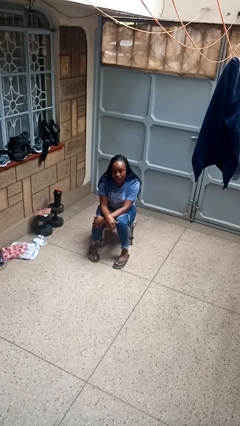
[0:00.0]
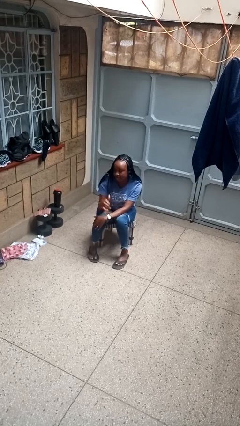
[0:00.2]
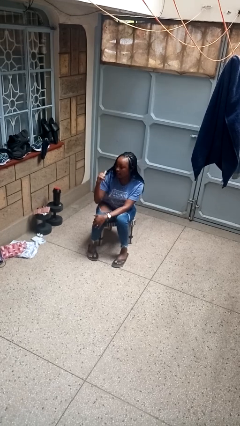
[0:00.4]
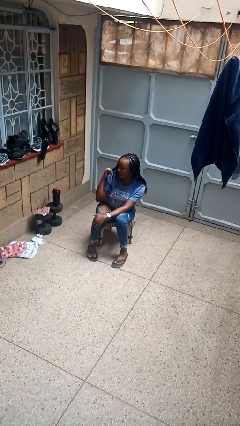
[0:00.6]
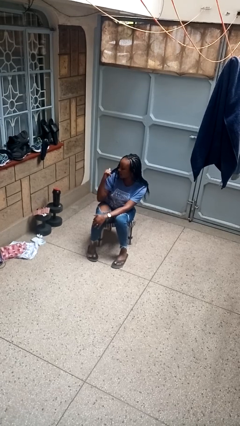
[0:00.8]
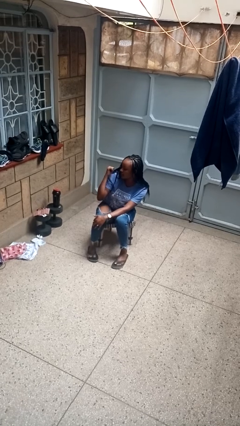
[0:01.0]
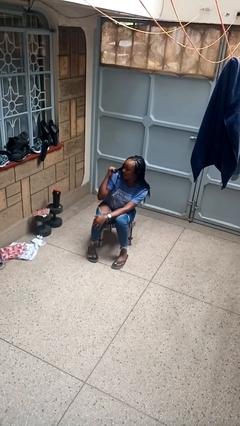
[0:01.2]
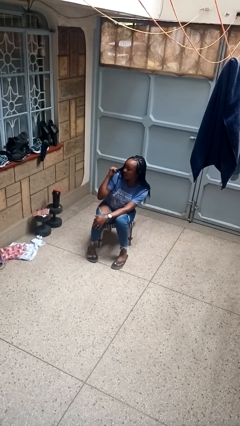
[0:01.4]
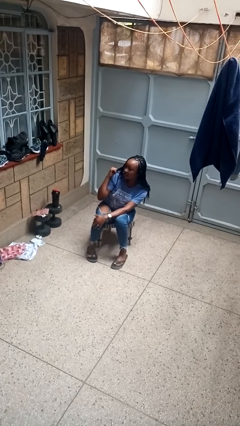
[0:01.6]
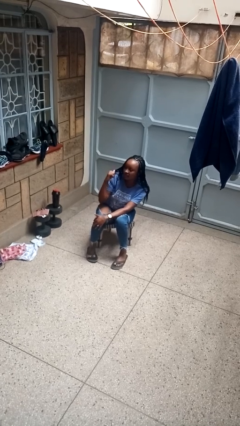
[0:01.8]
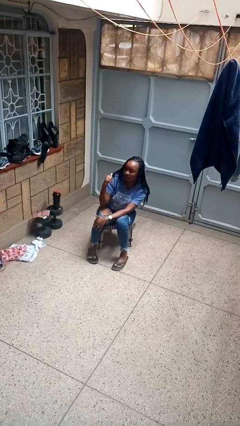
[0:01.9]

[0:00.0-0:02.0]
person gestures behind me

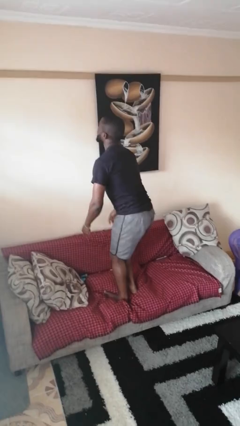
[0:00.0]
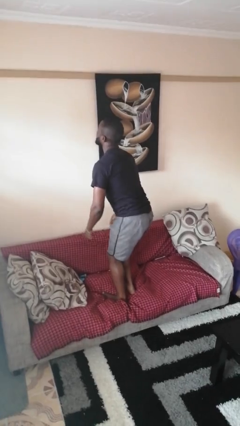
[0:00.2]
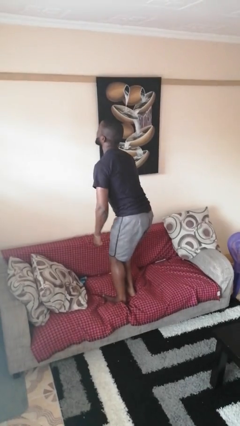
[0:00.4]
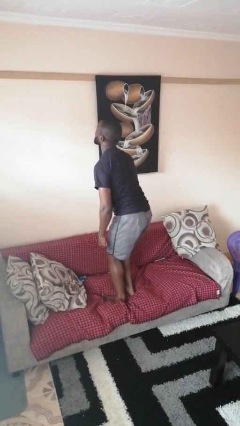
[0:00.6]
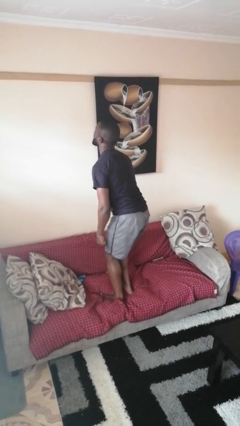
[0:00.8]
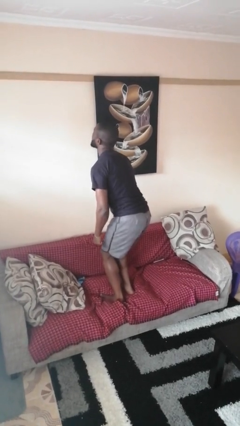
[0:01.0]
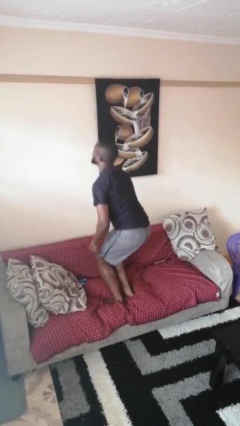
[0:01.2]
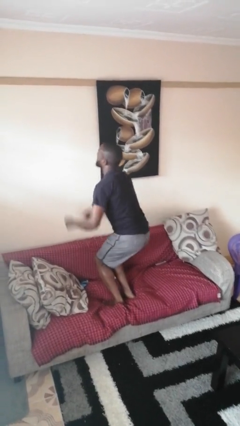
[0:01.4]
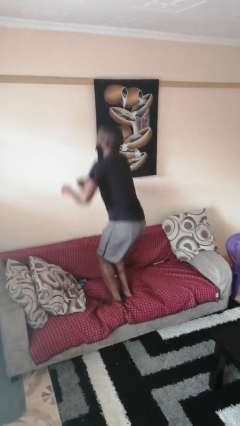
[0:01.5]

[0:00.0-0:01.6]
person jumps on couch

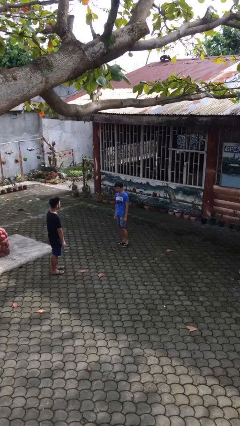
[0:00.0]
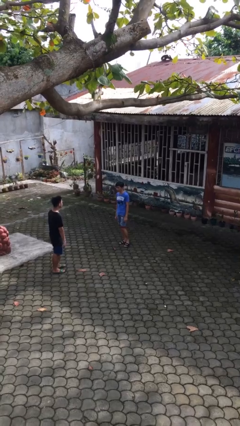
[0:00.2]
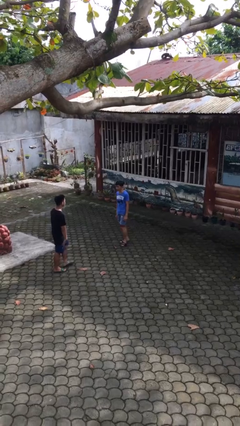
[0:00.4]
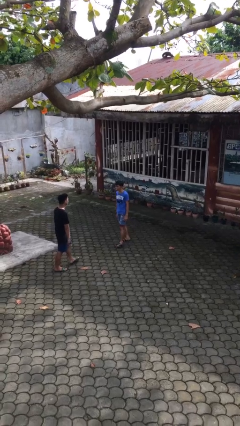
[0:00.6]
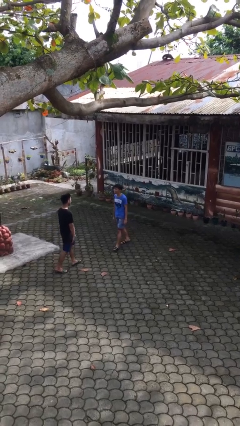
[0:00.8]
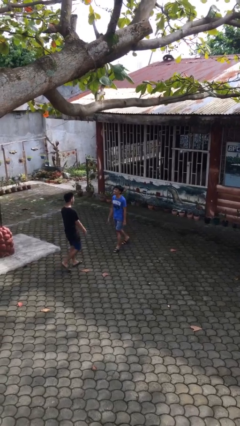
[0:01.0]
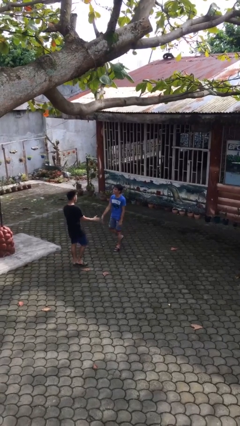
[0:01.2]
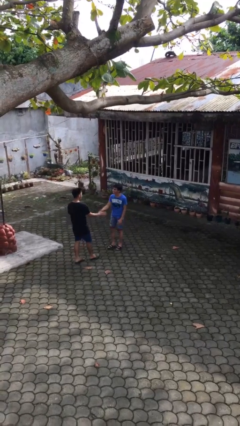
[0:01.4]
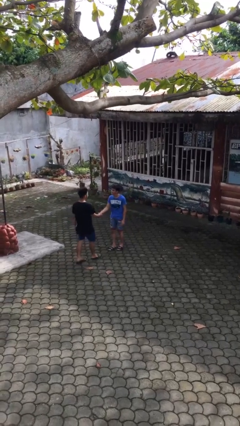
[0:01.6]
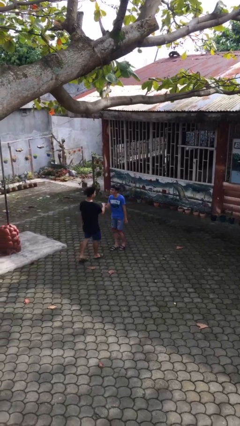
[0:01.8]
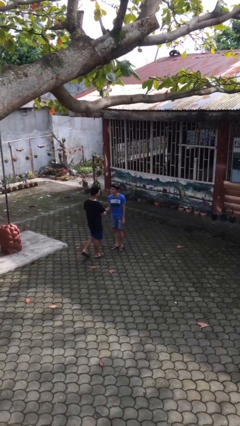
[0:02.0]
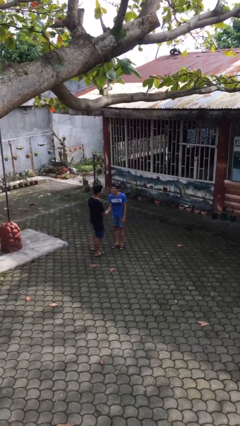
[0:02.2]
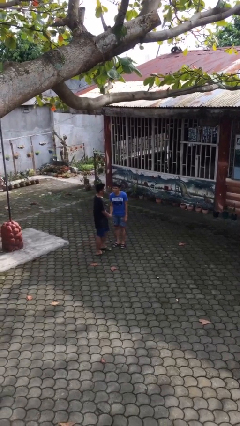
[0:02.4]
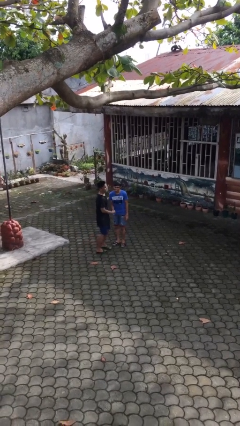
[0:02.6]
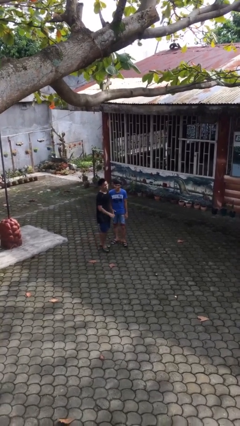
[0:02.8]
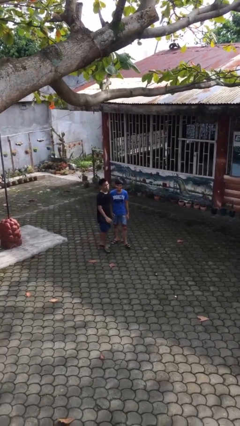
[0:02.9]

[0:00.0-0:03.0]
person shakes hand

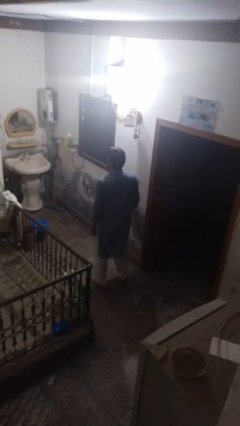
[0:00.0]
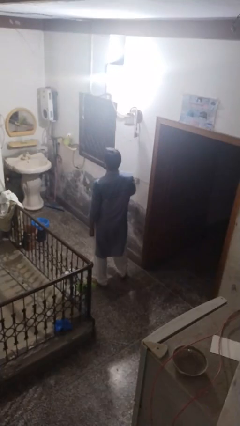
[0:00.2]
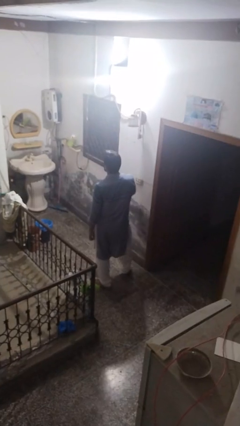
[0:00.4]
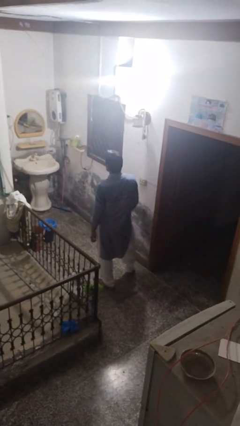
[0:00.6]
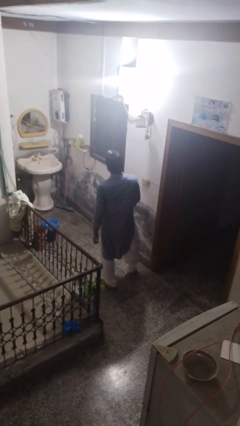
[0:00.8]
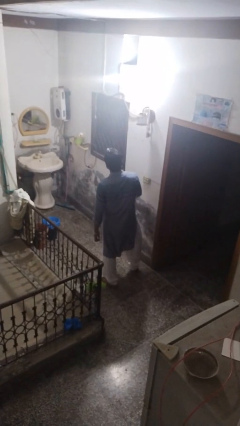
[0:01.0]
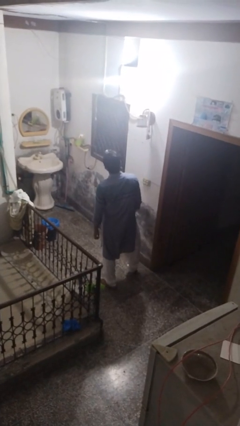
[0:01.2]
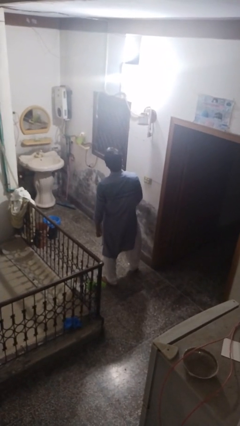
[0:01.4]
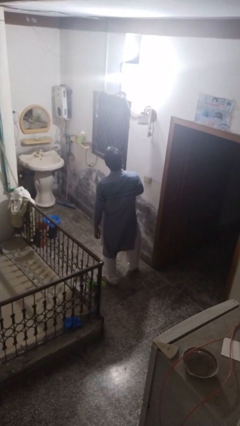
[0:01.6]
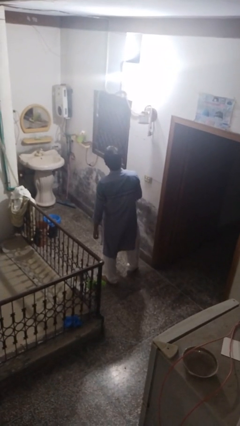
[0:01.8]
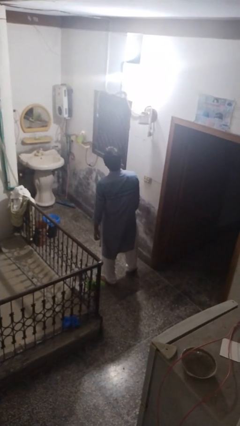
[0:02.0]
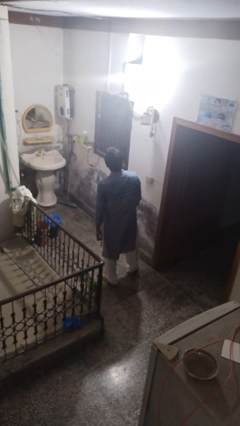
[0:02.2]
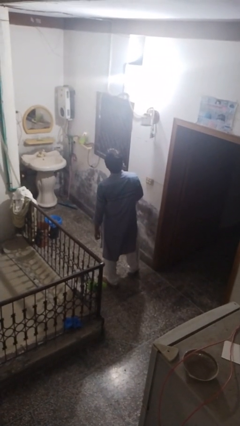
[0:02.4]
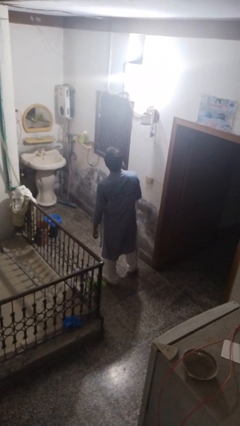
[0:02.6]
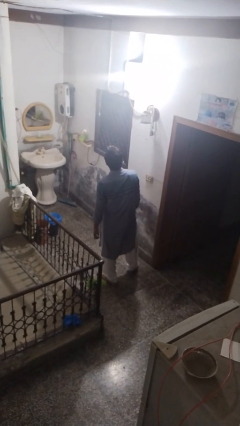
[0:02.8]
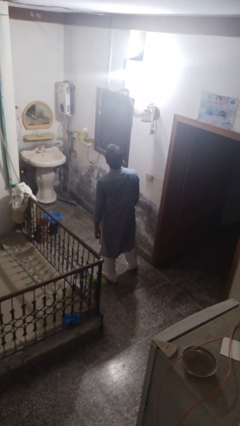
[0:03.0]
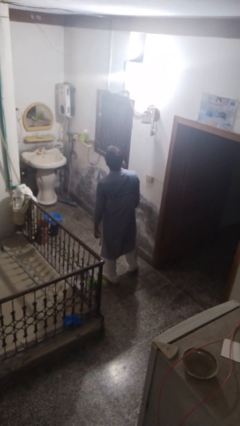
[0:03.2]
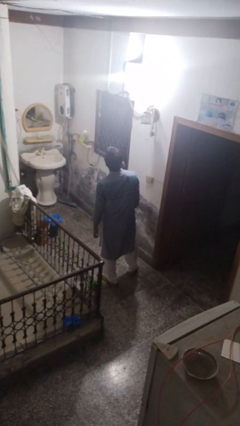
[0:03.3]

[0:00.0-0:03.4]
person slaps hands on thighs

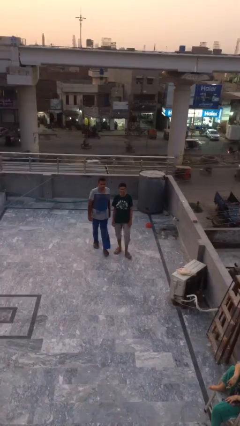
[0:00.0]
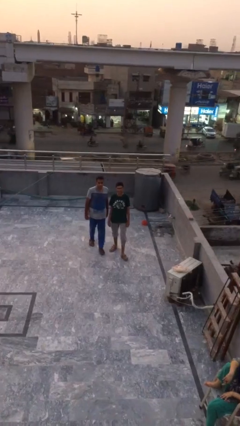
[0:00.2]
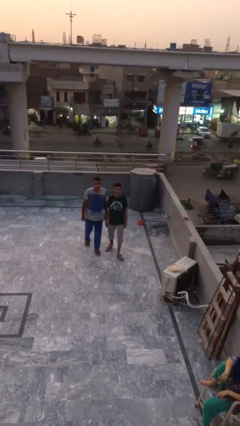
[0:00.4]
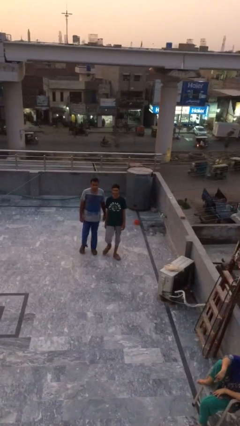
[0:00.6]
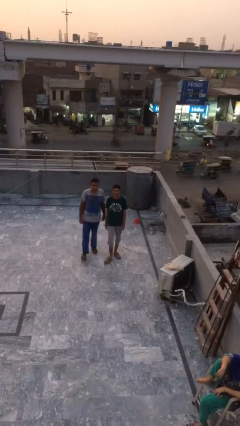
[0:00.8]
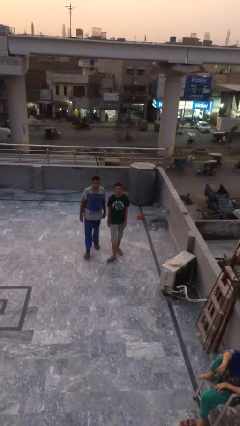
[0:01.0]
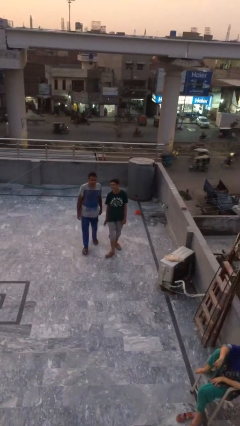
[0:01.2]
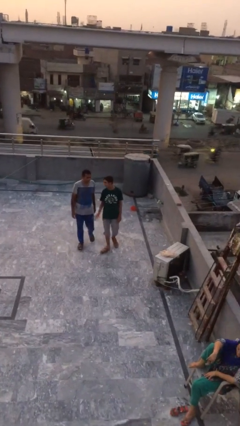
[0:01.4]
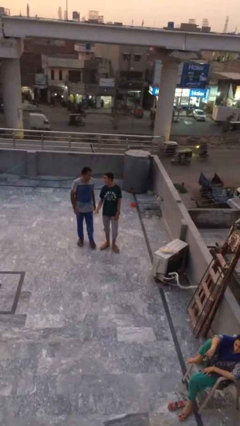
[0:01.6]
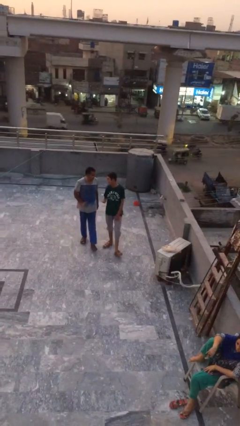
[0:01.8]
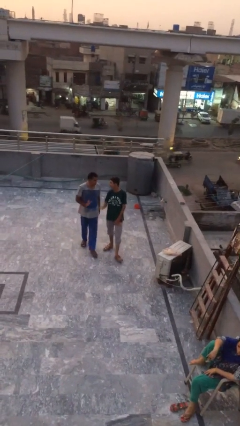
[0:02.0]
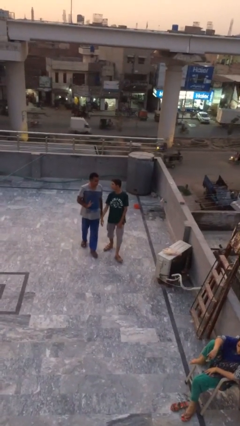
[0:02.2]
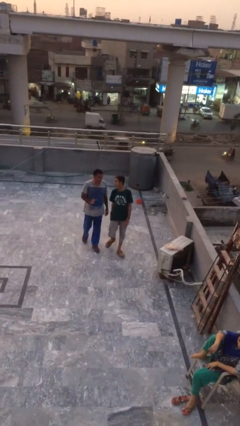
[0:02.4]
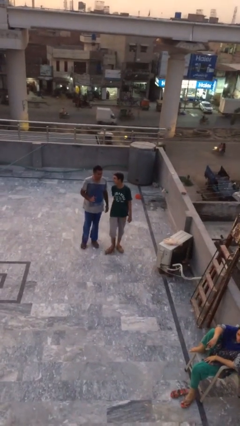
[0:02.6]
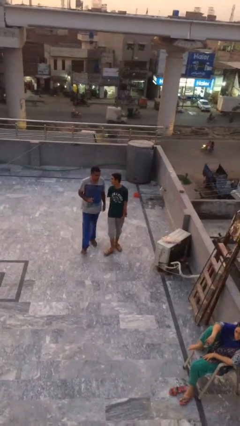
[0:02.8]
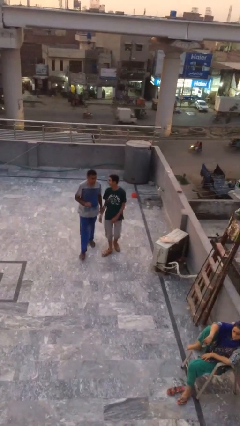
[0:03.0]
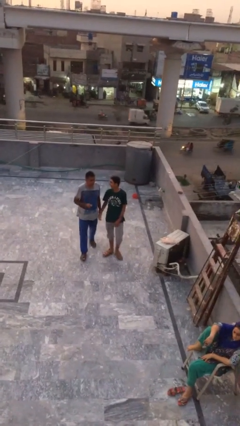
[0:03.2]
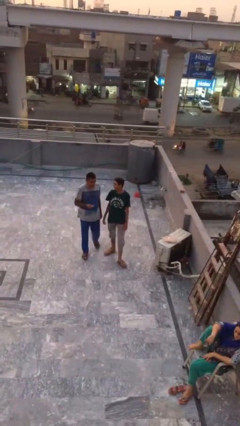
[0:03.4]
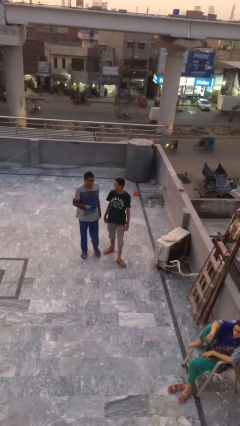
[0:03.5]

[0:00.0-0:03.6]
person talks to person

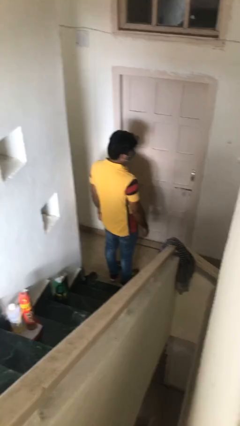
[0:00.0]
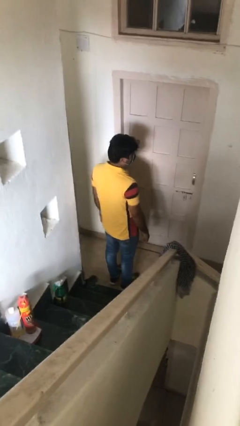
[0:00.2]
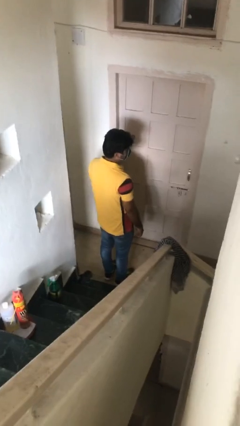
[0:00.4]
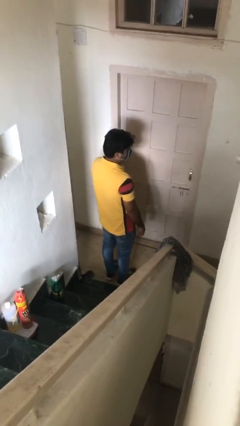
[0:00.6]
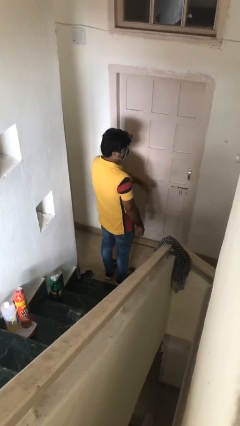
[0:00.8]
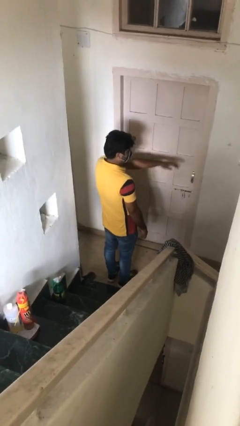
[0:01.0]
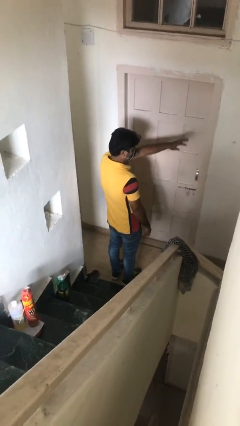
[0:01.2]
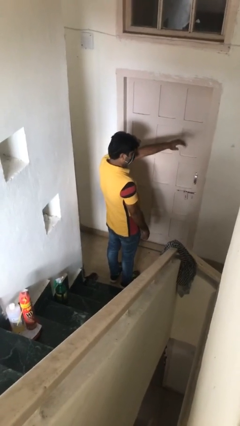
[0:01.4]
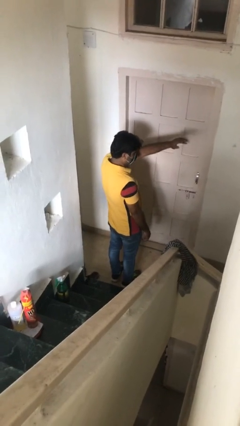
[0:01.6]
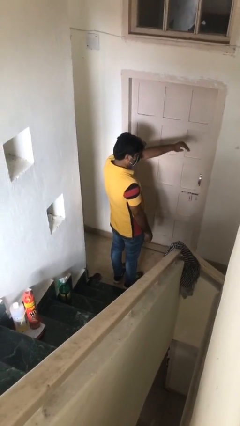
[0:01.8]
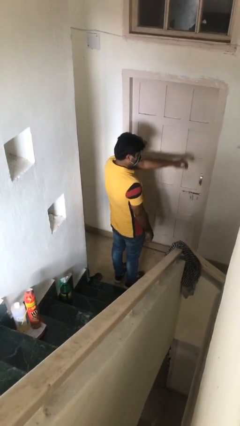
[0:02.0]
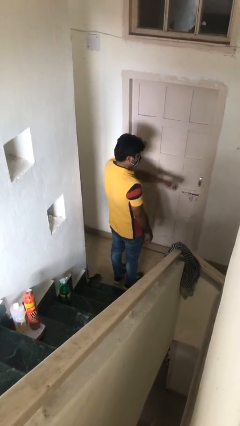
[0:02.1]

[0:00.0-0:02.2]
person gestures come here

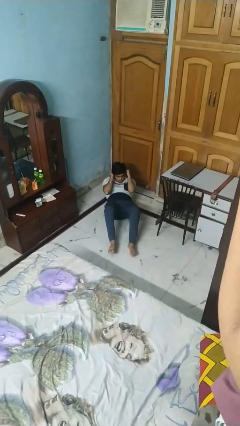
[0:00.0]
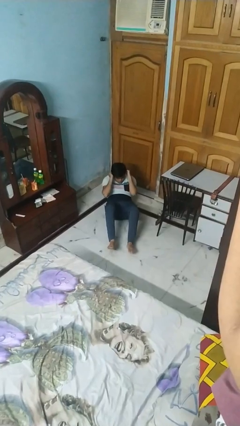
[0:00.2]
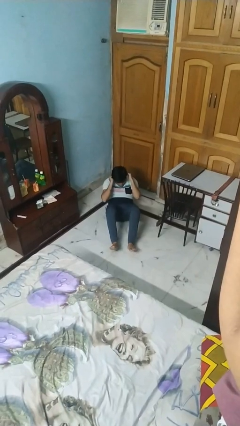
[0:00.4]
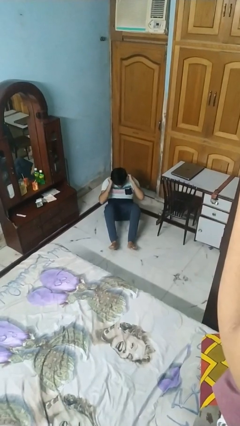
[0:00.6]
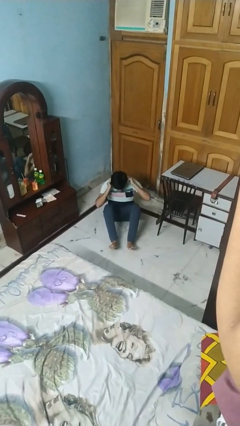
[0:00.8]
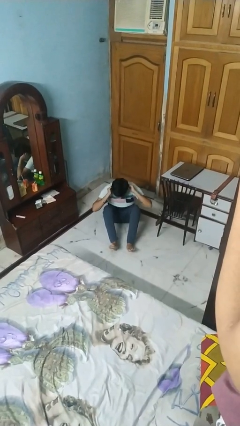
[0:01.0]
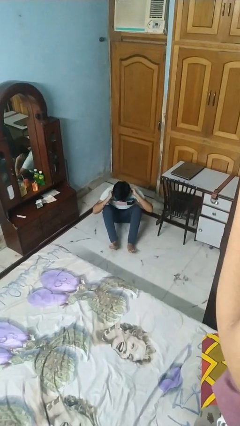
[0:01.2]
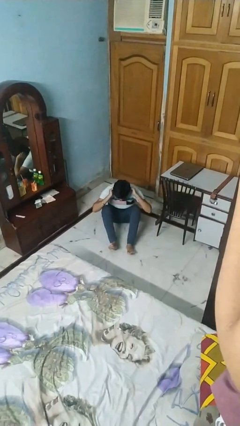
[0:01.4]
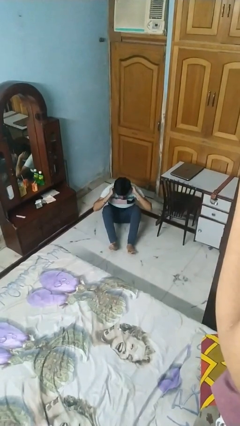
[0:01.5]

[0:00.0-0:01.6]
person exercises with situp
